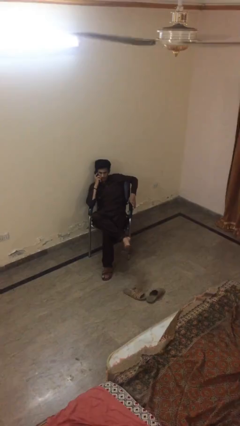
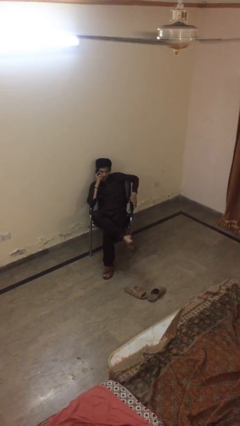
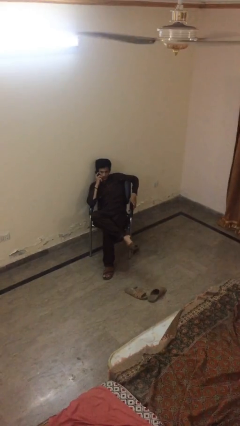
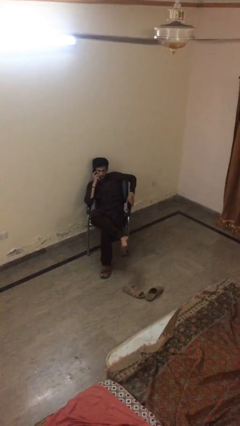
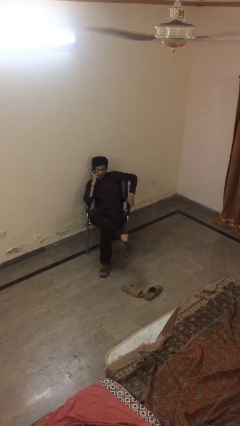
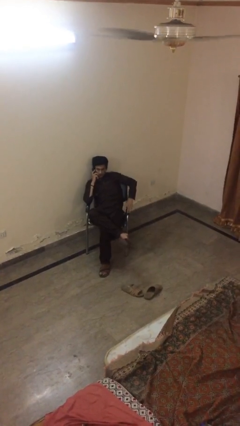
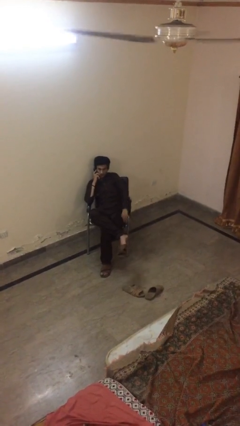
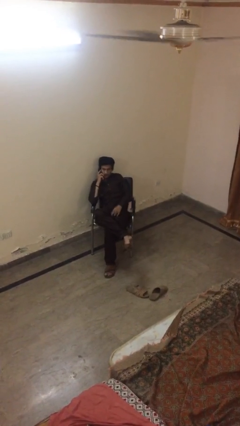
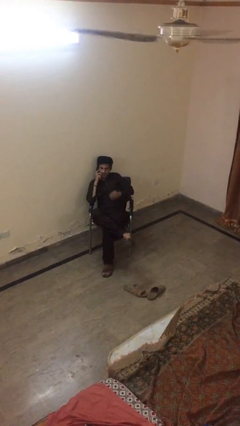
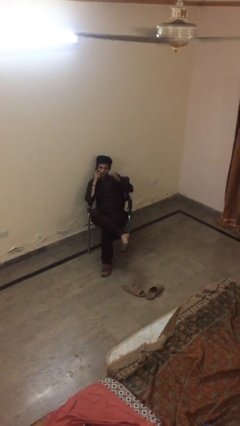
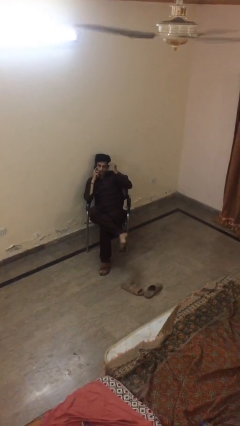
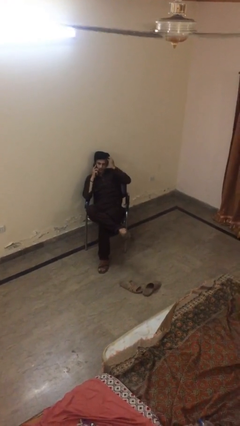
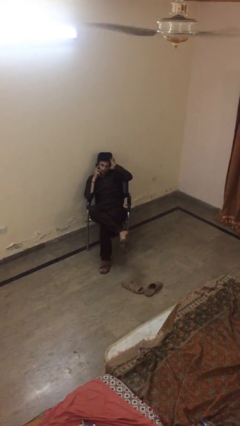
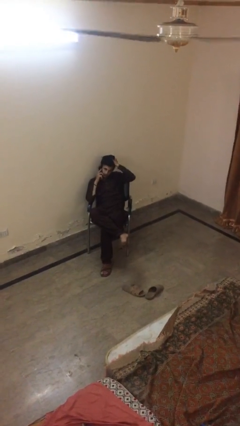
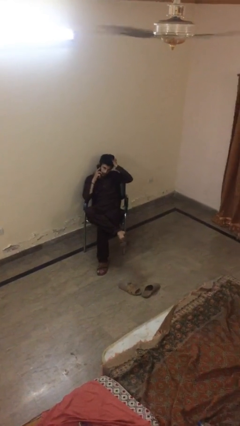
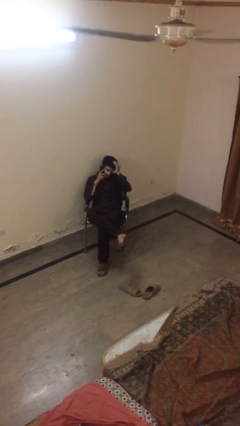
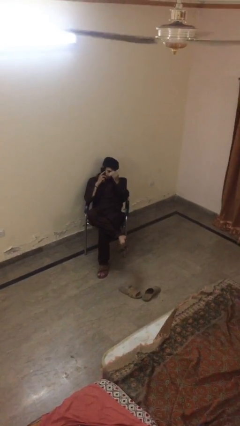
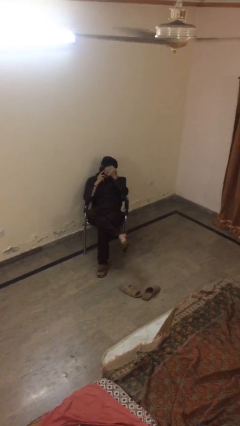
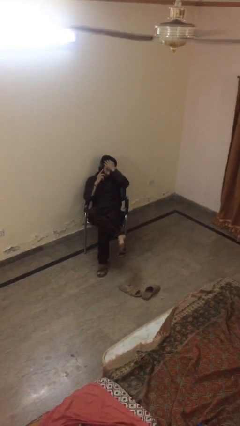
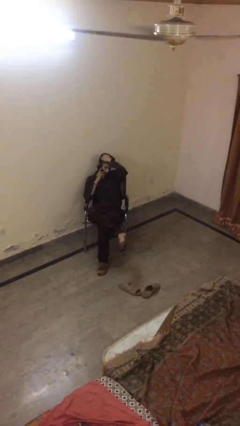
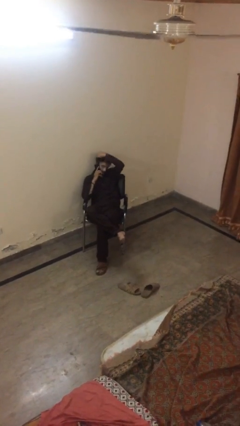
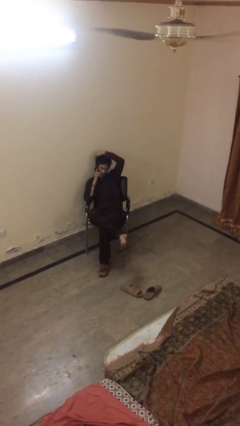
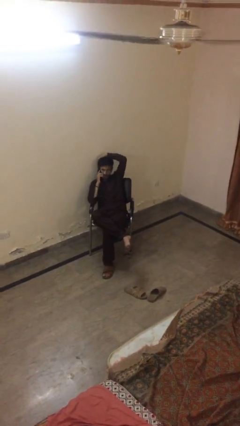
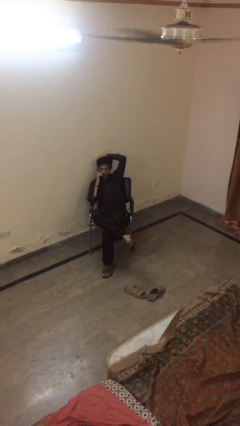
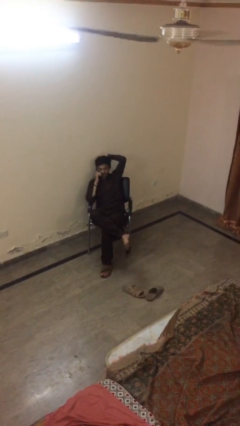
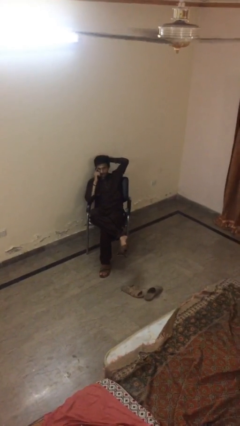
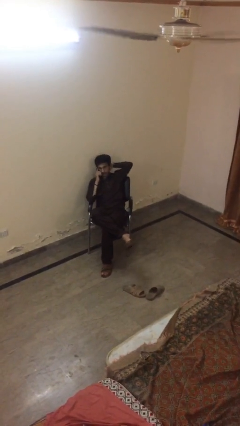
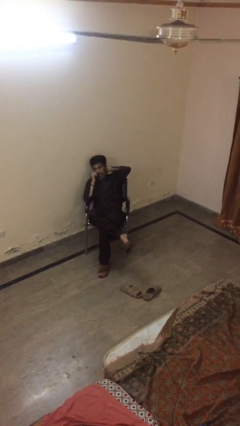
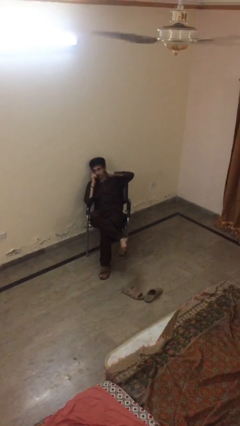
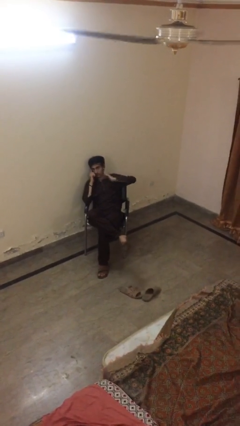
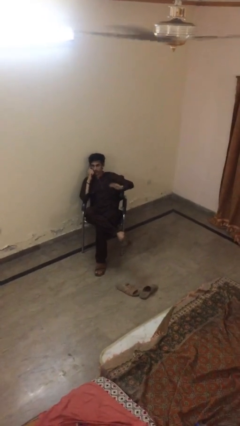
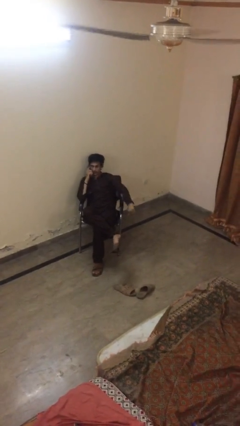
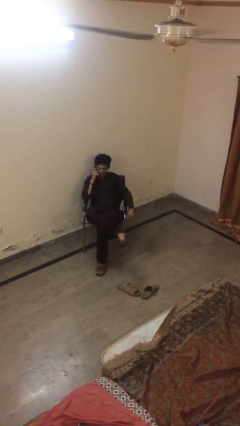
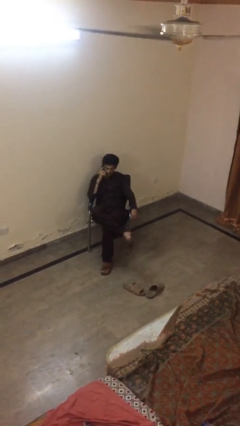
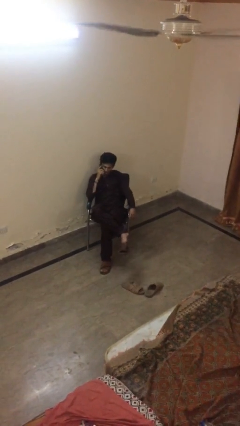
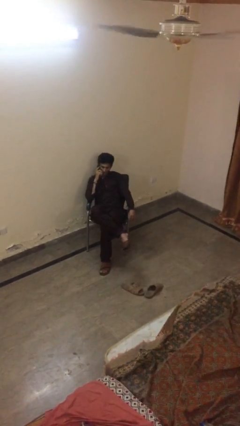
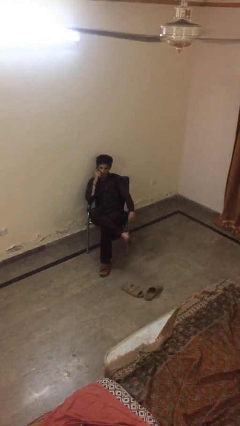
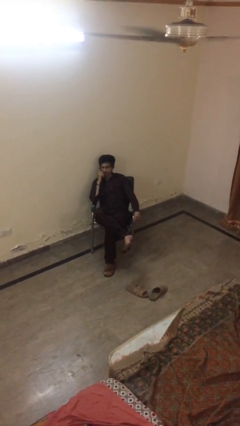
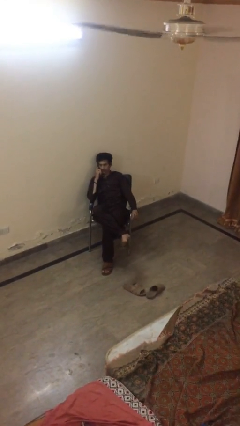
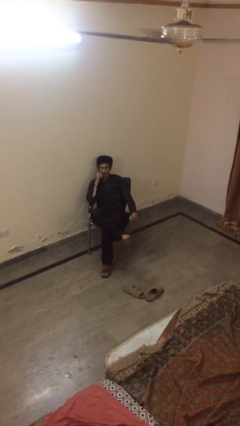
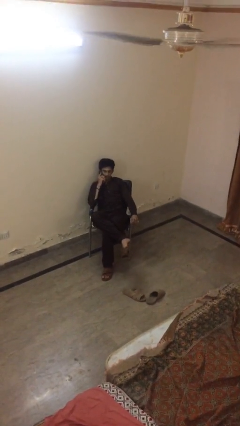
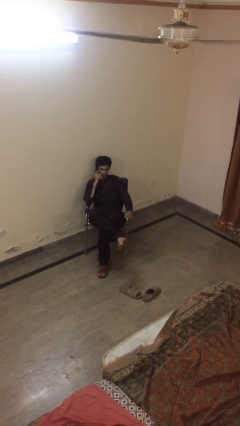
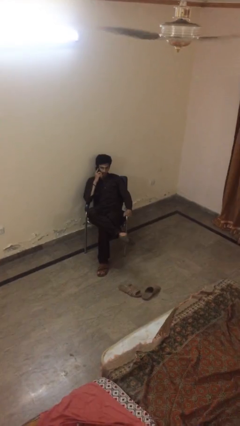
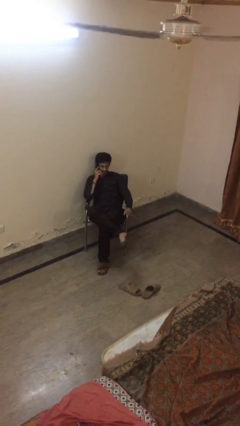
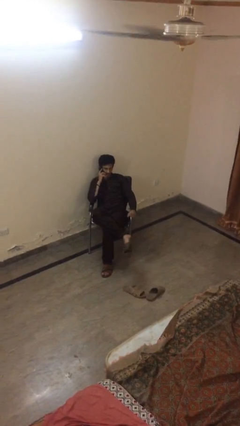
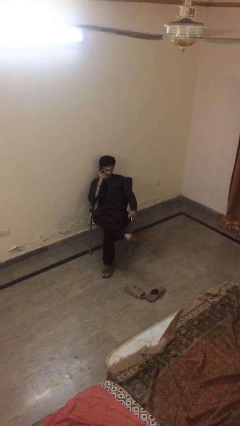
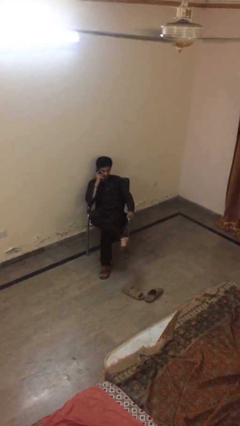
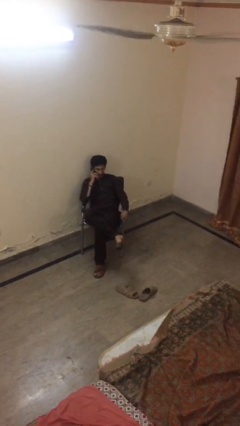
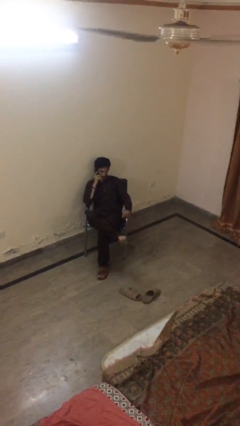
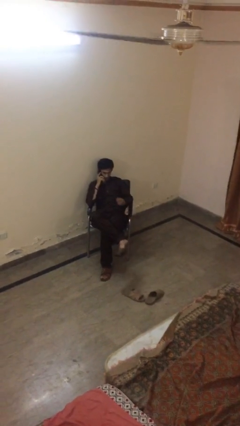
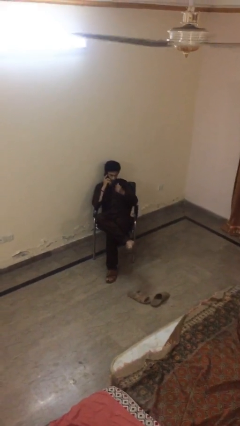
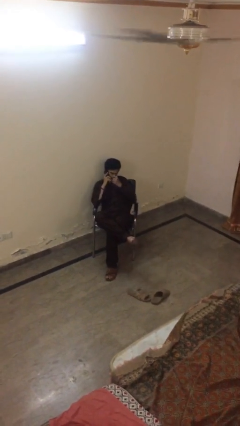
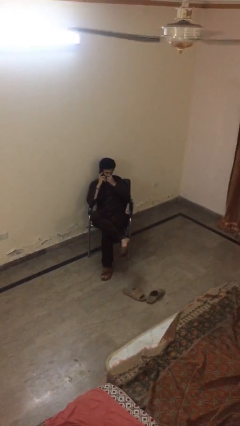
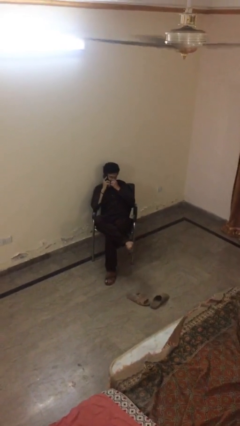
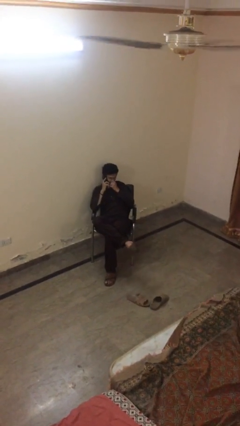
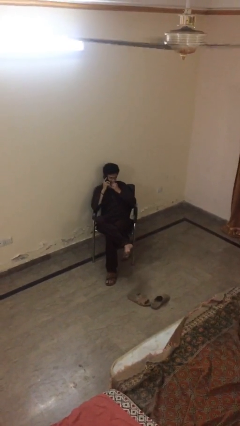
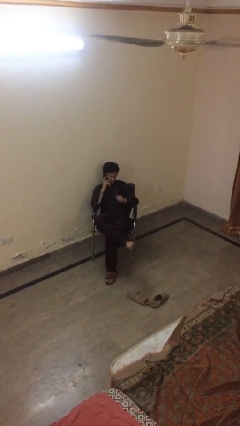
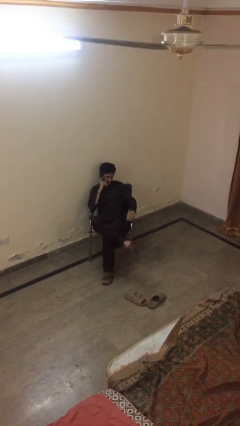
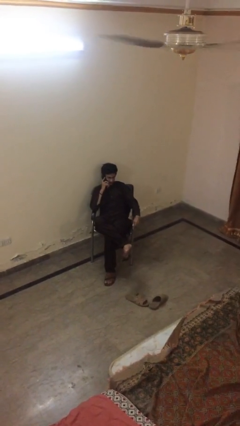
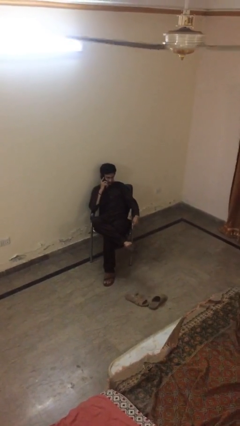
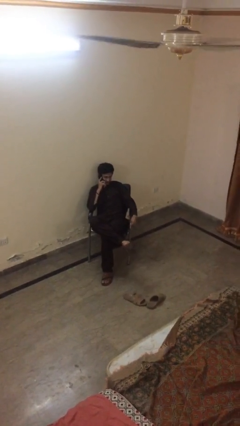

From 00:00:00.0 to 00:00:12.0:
person talks on phone

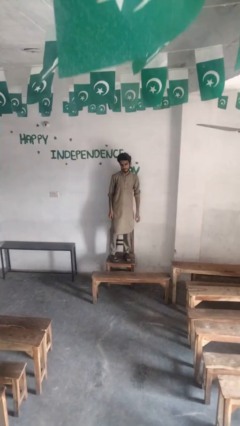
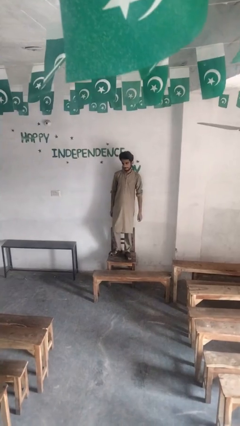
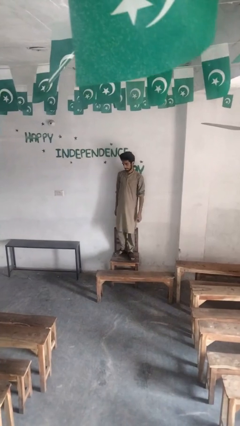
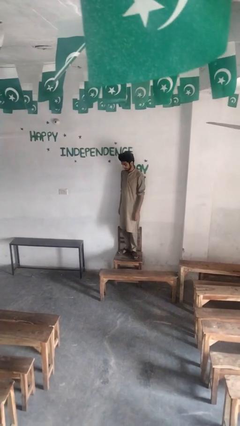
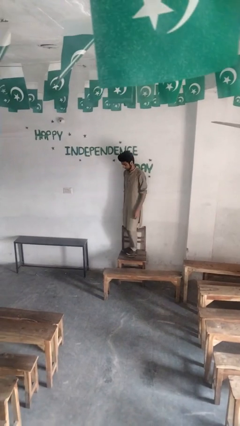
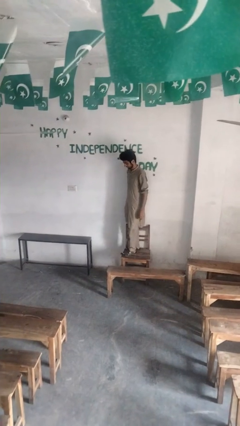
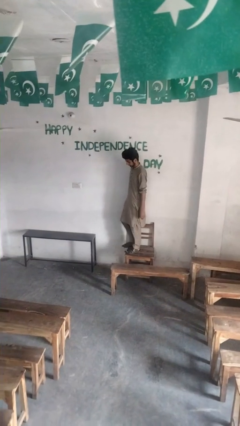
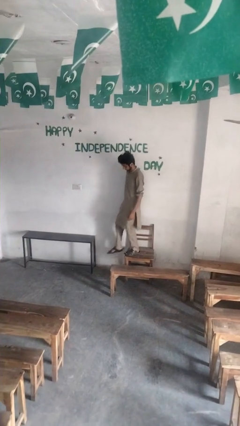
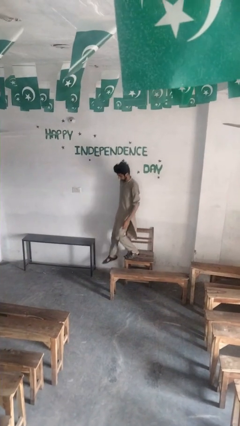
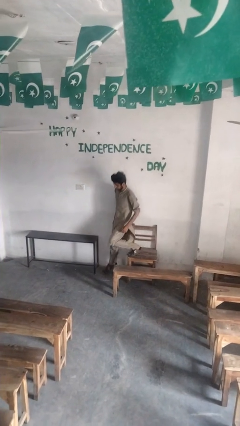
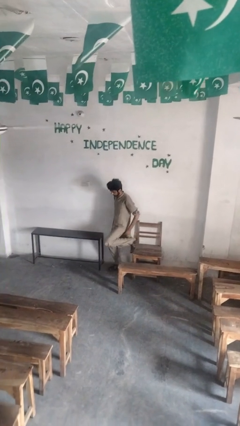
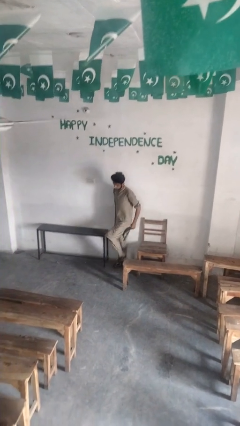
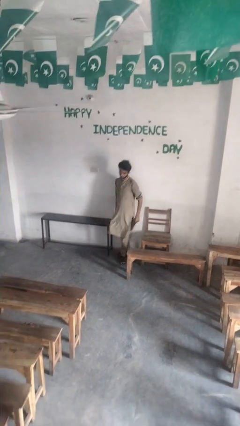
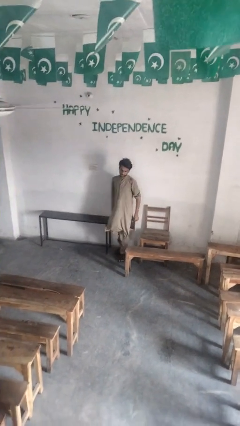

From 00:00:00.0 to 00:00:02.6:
person climbs off chair

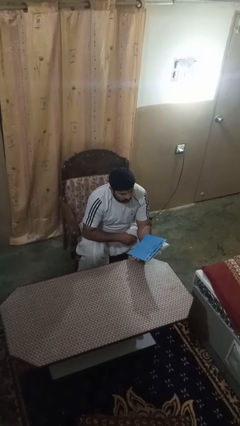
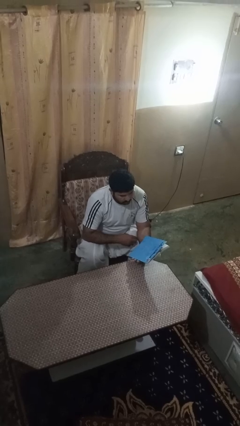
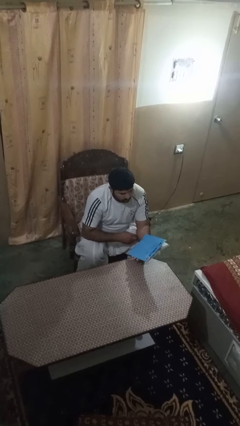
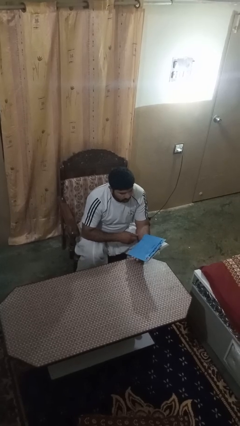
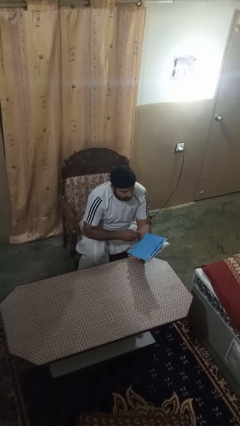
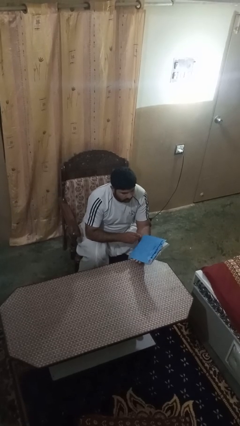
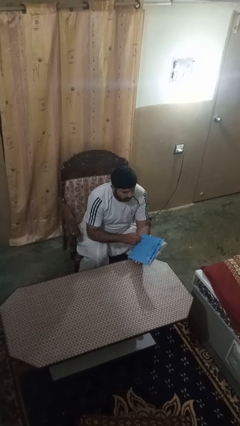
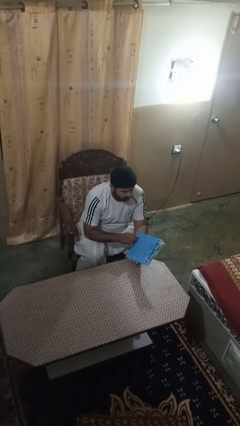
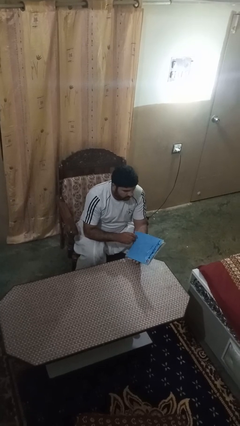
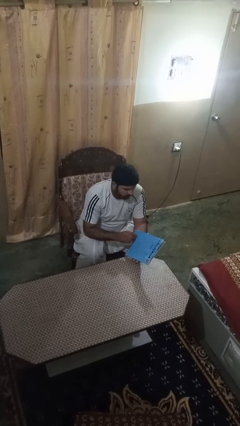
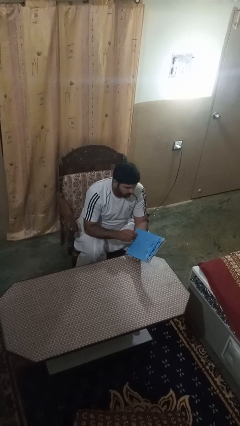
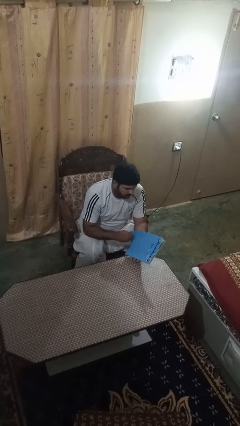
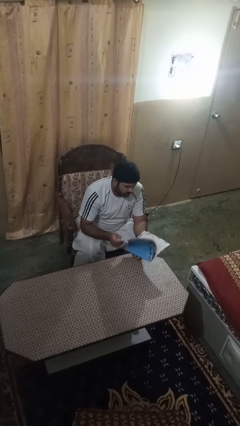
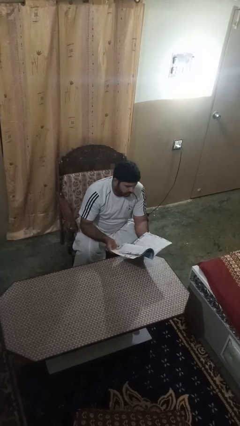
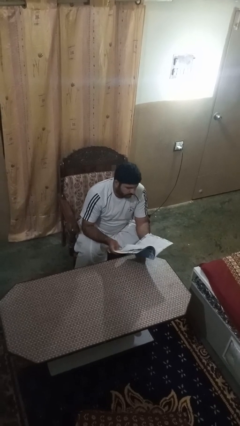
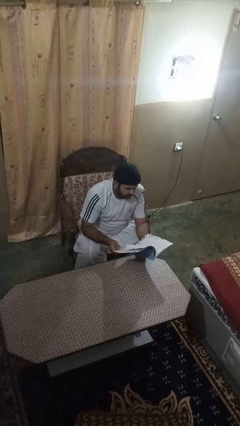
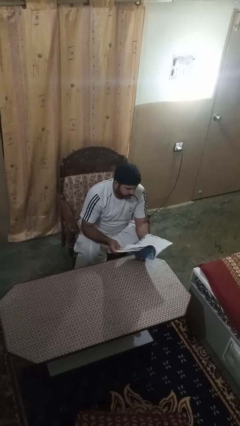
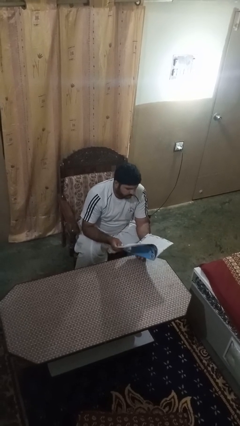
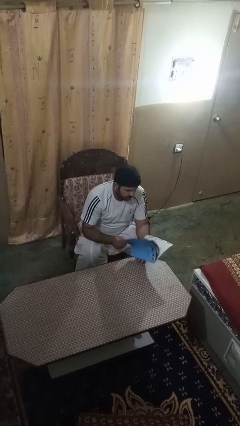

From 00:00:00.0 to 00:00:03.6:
person reads magazine
